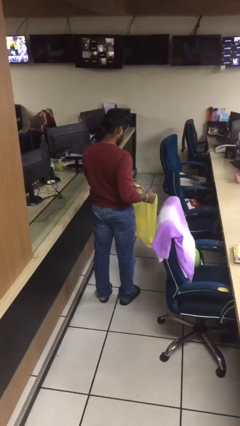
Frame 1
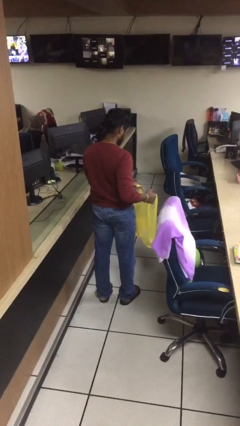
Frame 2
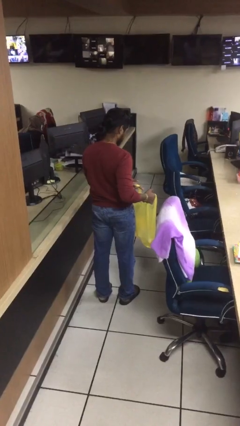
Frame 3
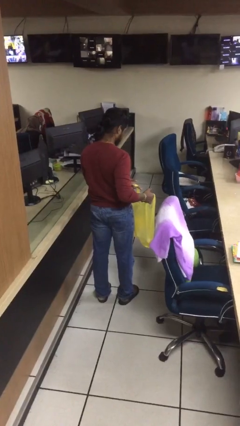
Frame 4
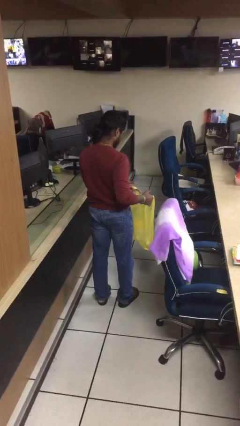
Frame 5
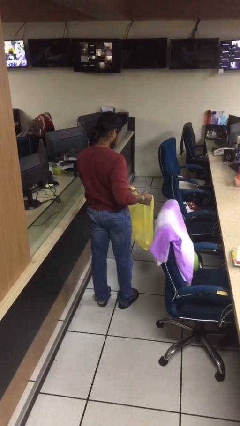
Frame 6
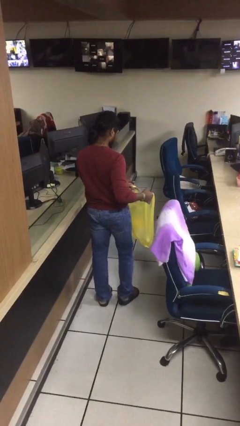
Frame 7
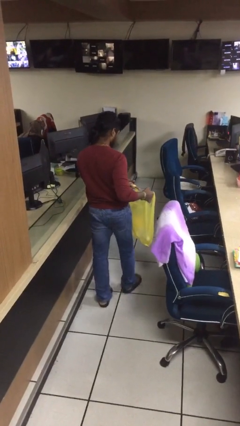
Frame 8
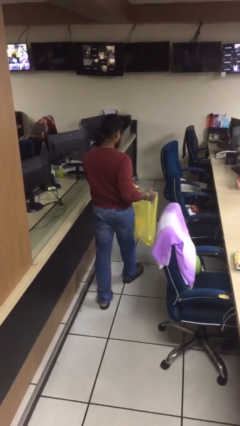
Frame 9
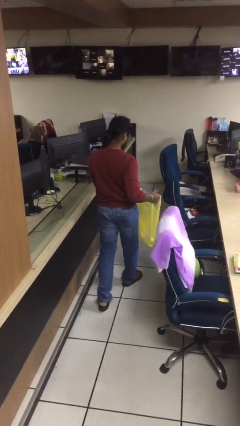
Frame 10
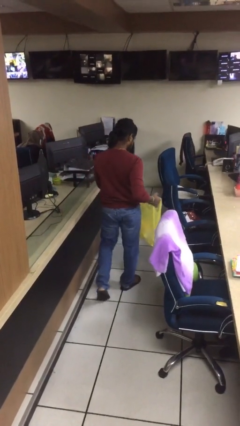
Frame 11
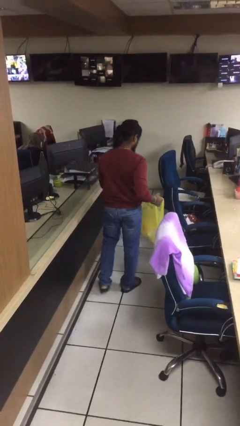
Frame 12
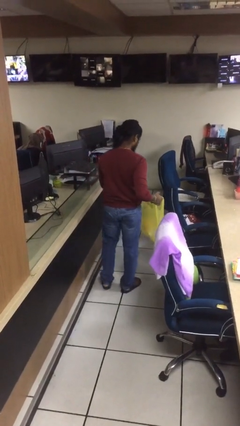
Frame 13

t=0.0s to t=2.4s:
person carries groceries

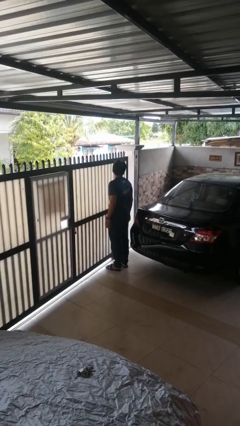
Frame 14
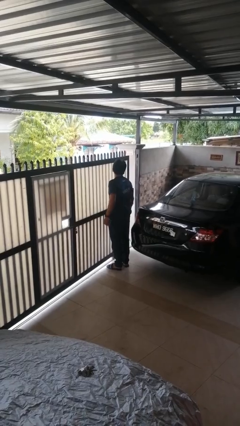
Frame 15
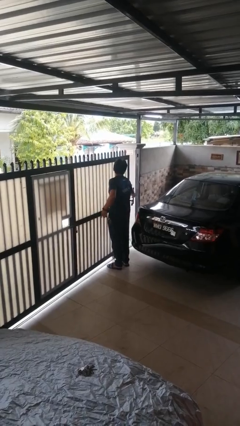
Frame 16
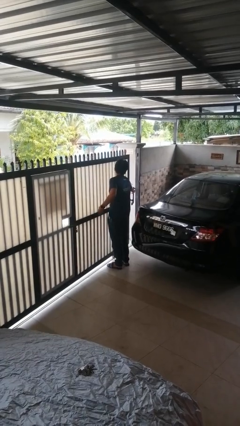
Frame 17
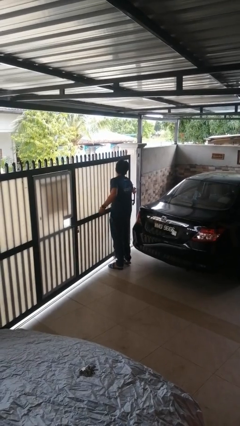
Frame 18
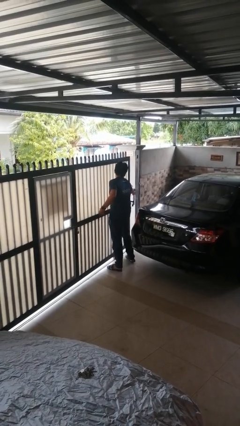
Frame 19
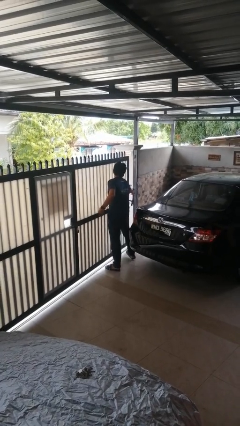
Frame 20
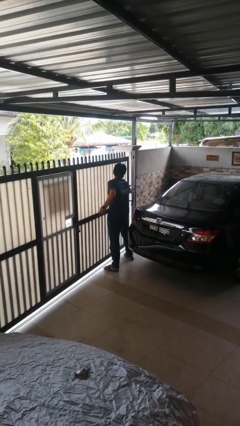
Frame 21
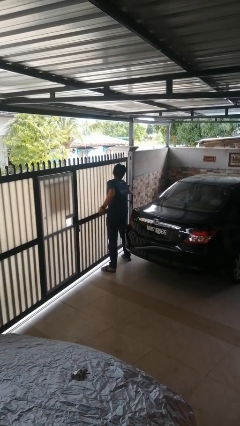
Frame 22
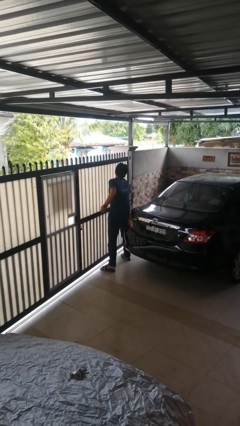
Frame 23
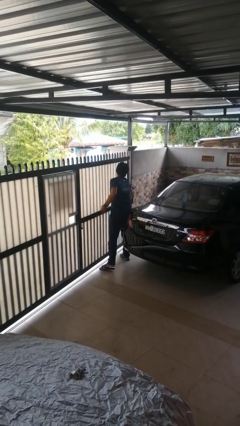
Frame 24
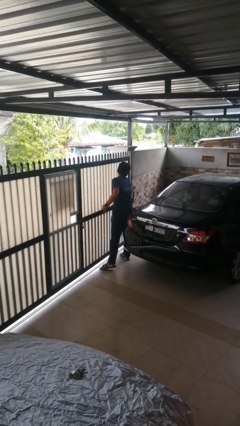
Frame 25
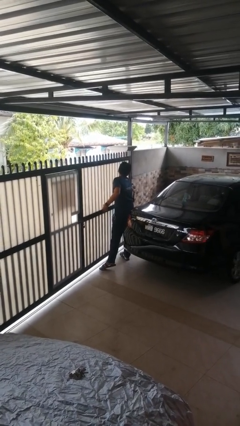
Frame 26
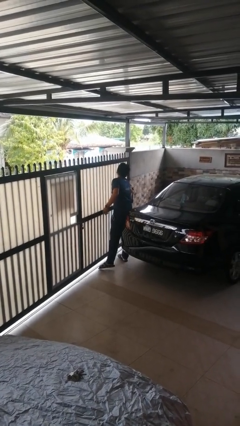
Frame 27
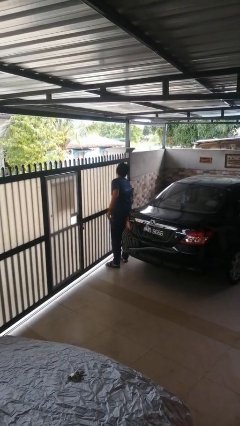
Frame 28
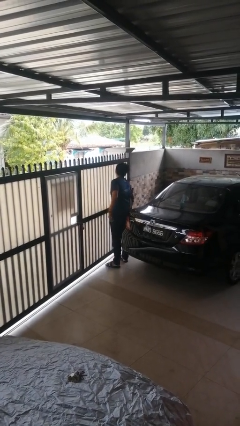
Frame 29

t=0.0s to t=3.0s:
person closes sliding door

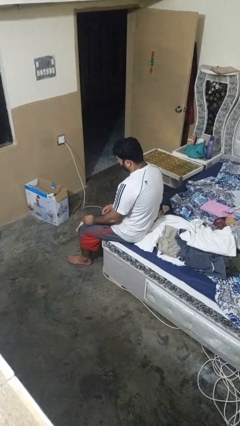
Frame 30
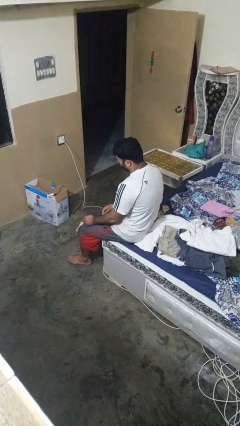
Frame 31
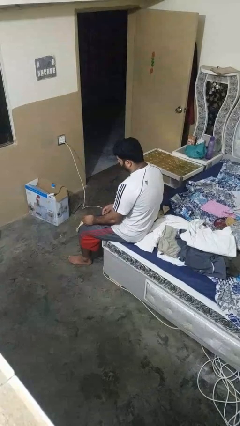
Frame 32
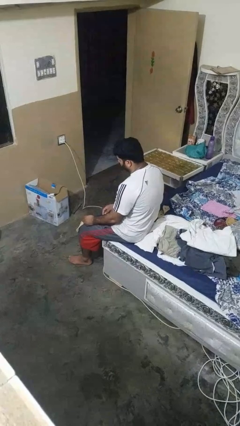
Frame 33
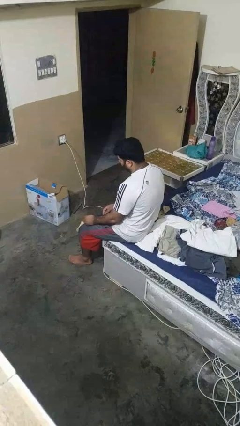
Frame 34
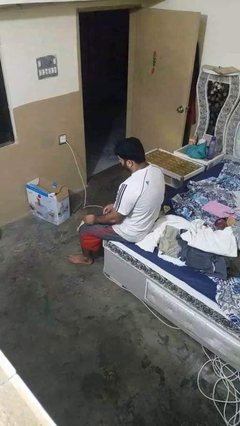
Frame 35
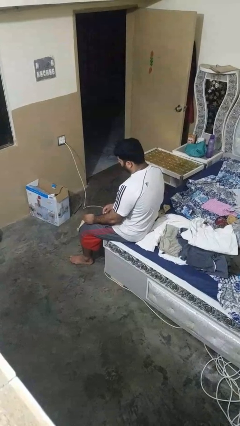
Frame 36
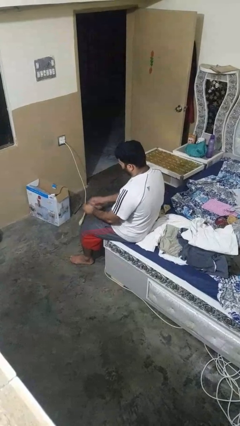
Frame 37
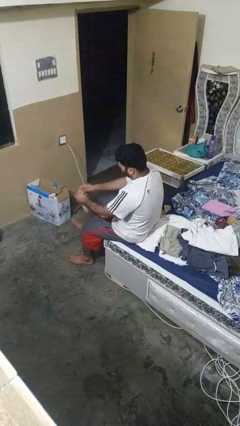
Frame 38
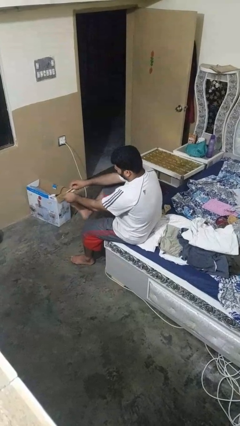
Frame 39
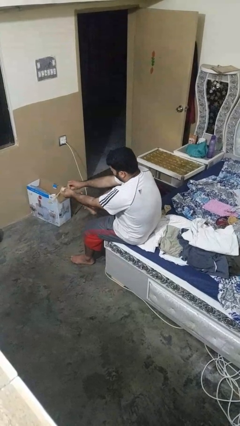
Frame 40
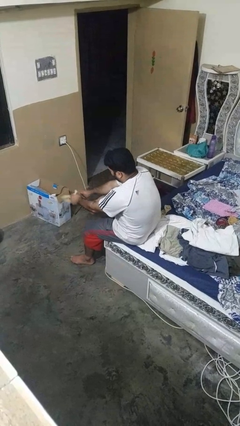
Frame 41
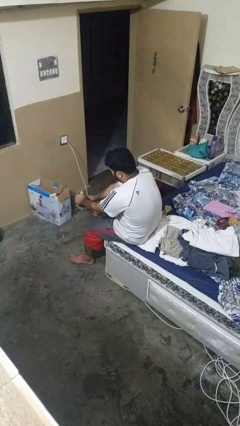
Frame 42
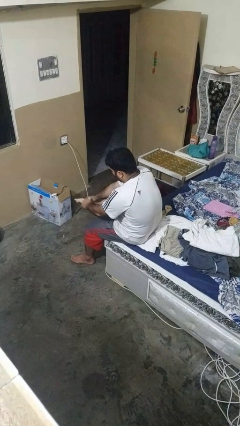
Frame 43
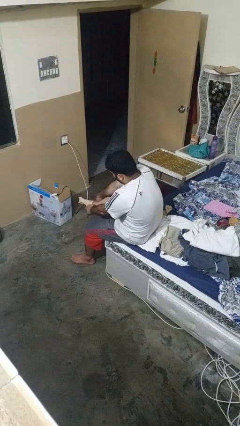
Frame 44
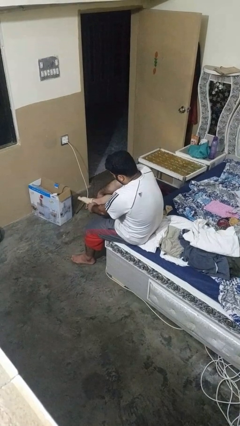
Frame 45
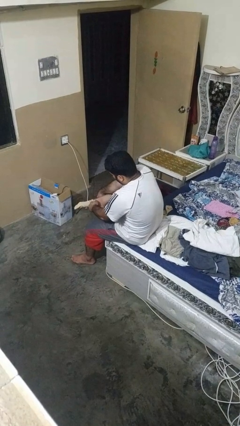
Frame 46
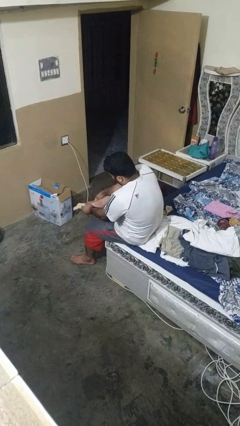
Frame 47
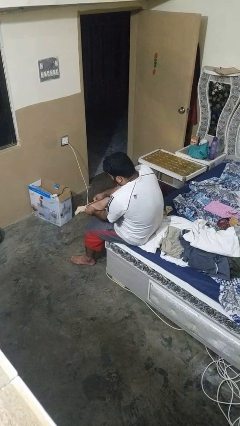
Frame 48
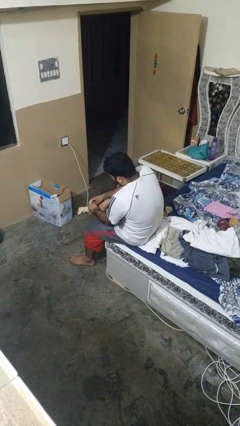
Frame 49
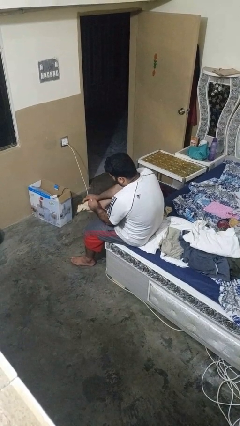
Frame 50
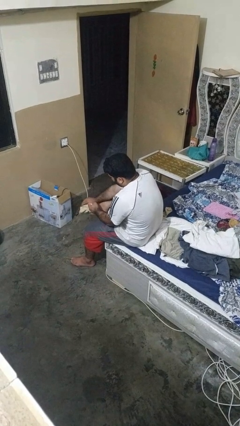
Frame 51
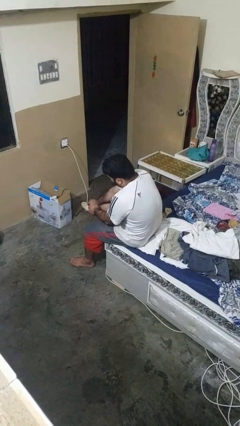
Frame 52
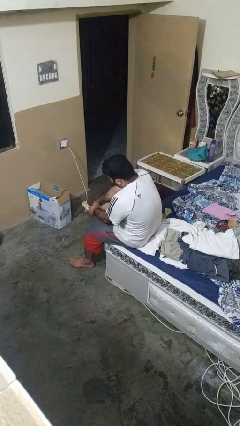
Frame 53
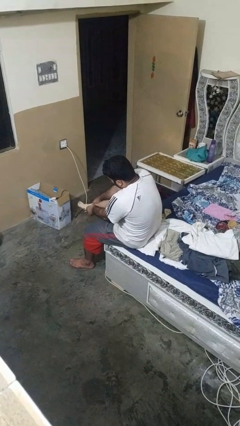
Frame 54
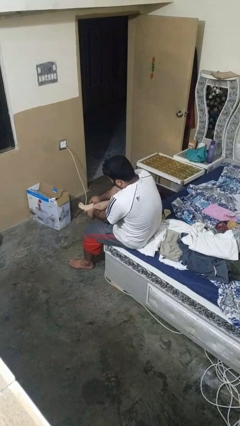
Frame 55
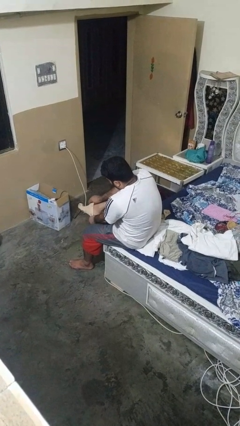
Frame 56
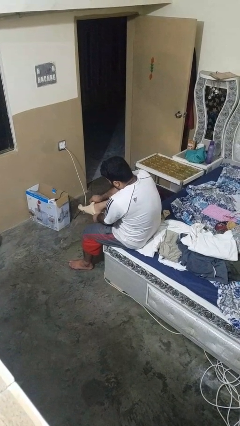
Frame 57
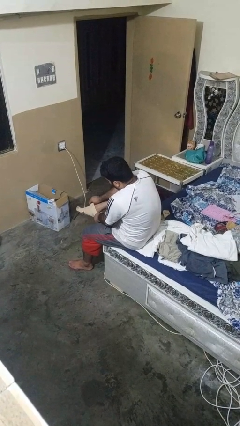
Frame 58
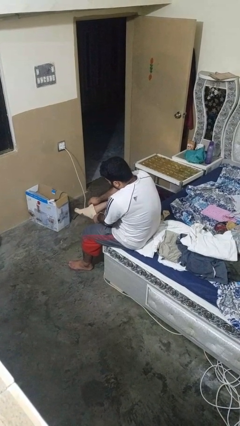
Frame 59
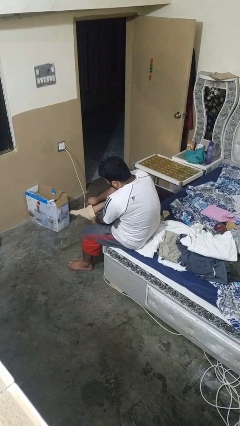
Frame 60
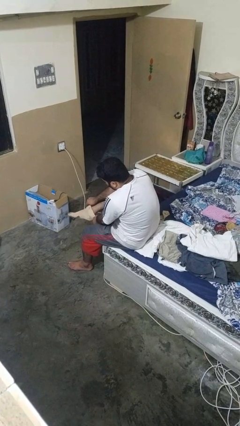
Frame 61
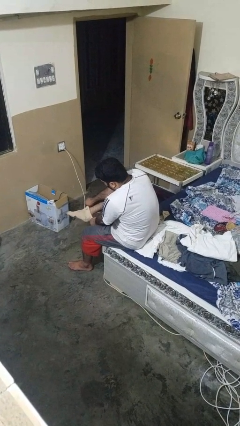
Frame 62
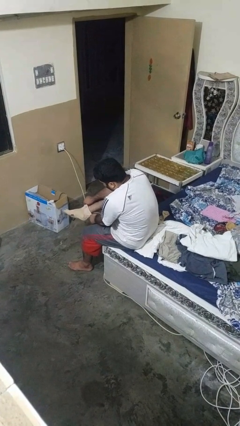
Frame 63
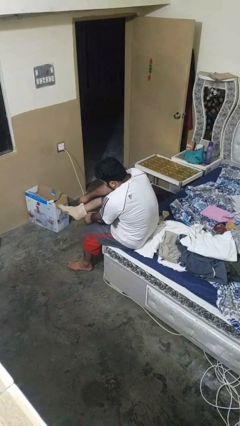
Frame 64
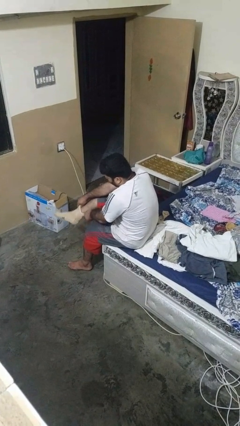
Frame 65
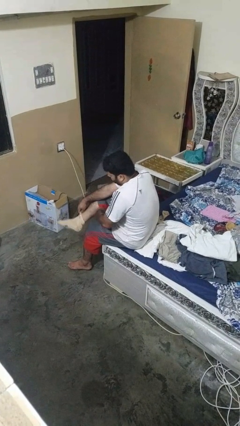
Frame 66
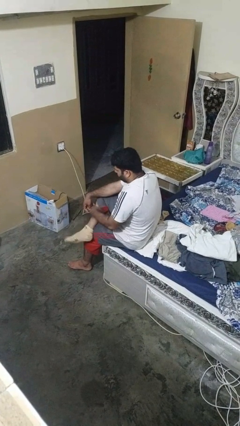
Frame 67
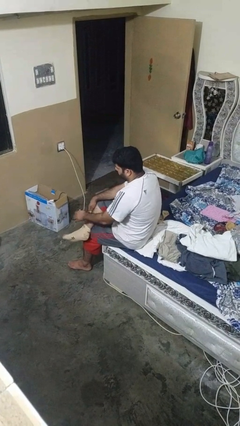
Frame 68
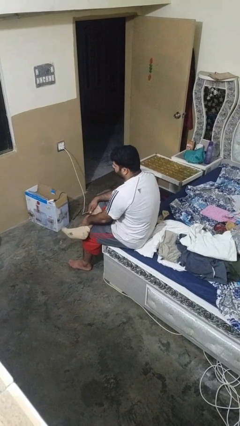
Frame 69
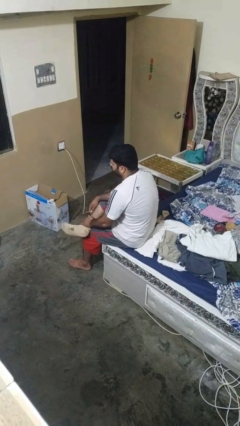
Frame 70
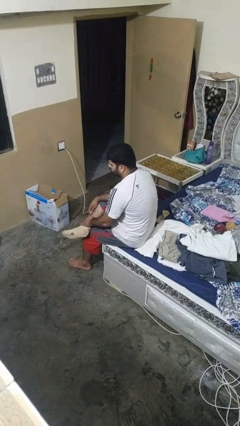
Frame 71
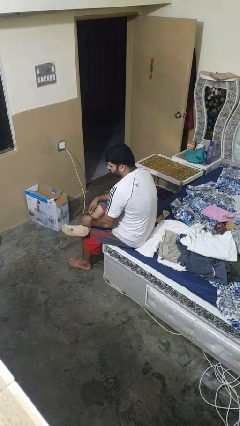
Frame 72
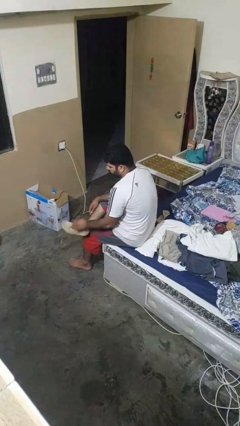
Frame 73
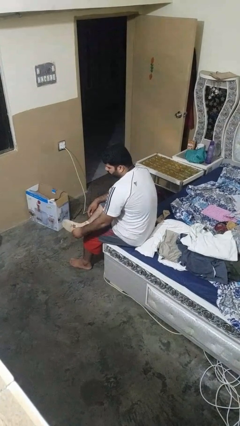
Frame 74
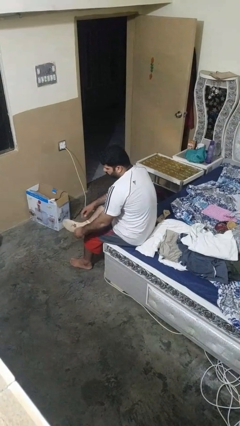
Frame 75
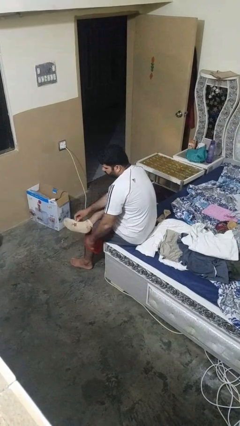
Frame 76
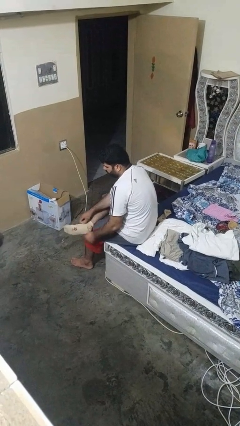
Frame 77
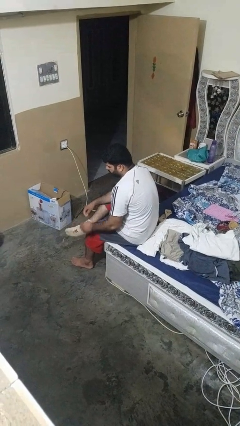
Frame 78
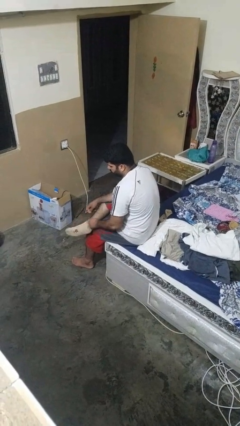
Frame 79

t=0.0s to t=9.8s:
person puts on socks

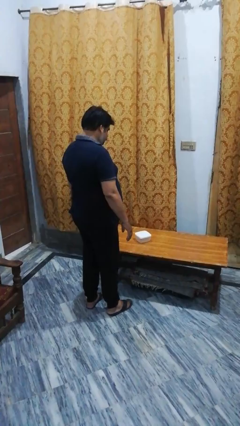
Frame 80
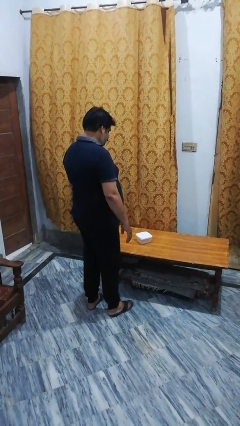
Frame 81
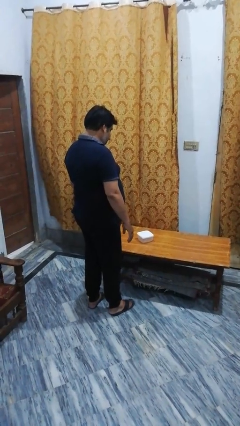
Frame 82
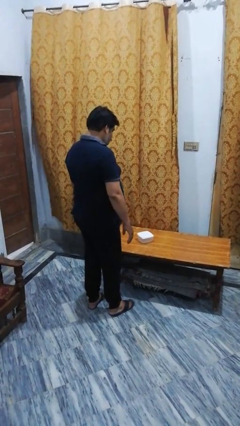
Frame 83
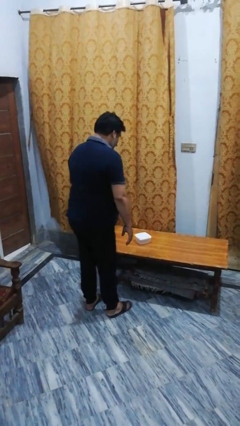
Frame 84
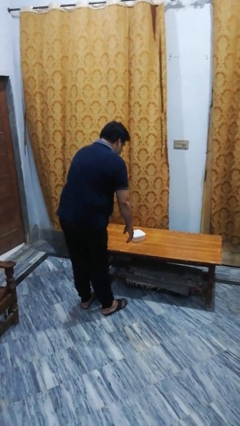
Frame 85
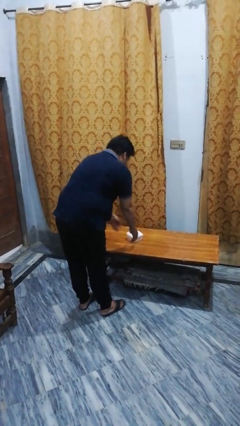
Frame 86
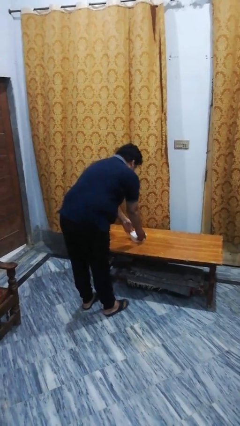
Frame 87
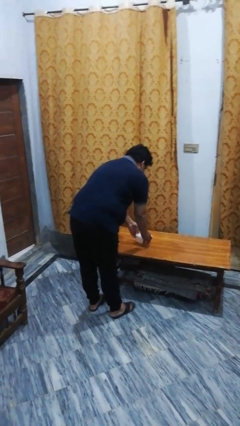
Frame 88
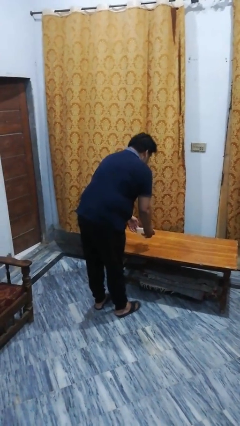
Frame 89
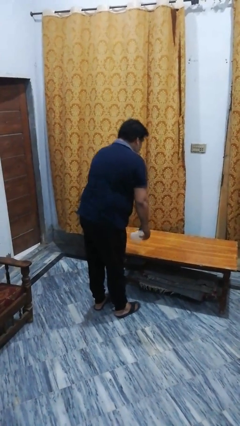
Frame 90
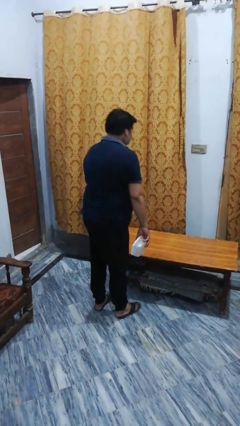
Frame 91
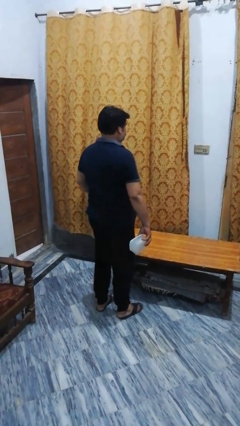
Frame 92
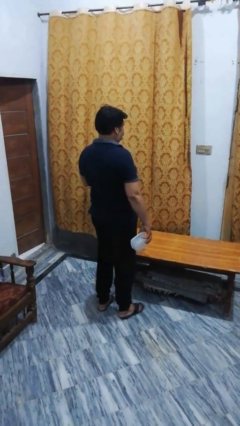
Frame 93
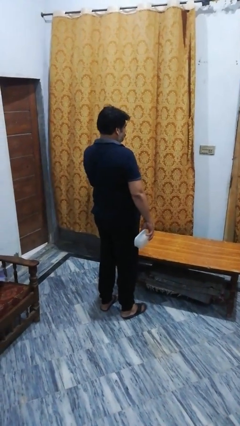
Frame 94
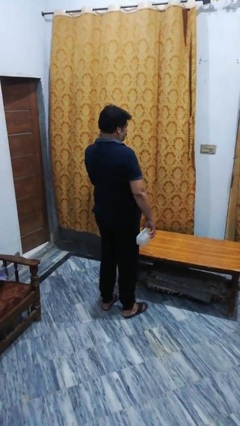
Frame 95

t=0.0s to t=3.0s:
person picks up object from table
